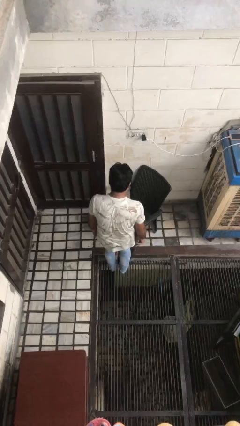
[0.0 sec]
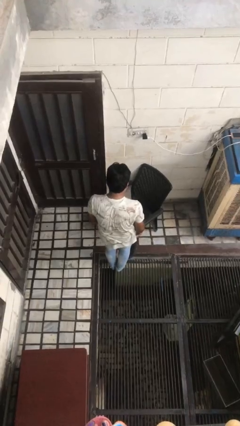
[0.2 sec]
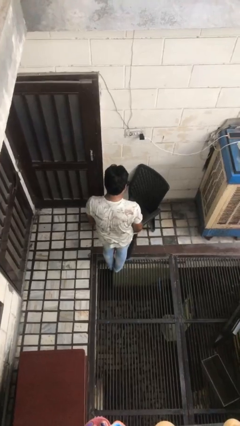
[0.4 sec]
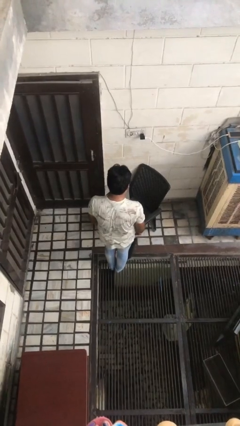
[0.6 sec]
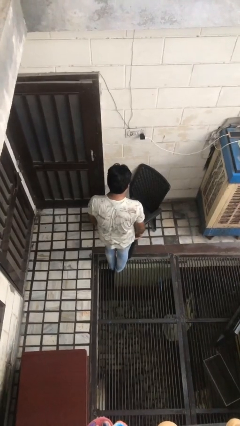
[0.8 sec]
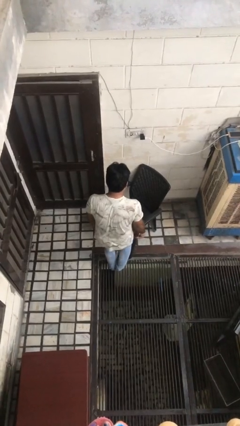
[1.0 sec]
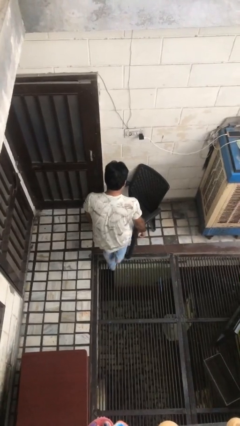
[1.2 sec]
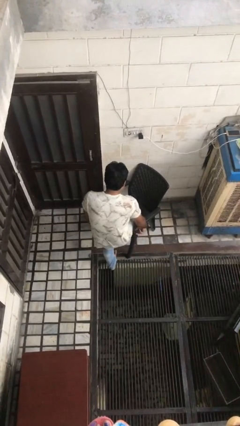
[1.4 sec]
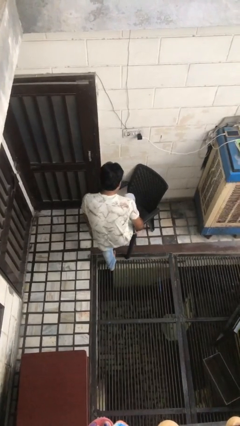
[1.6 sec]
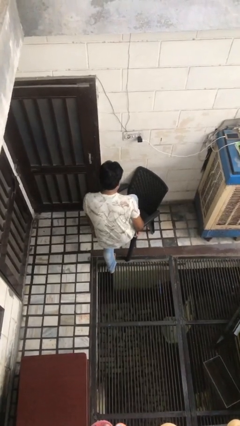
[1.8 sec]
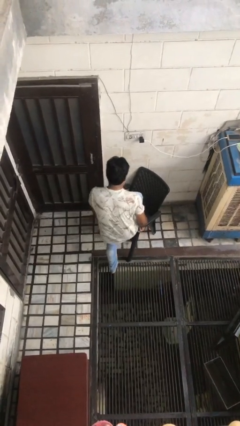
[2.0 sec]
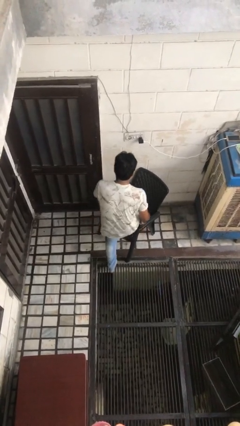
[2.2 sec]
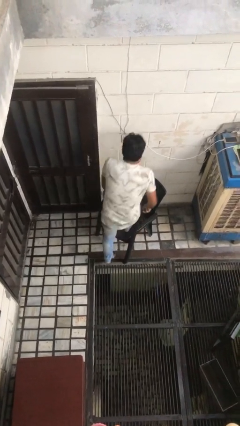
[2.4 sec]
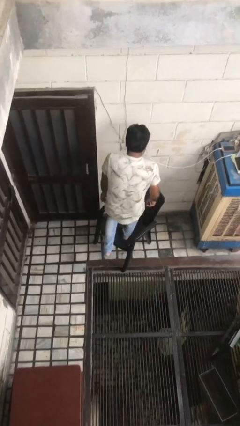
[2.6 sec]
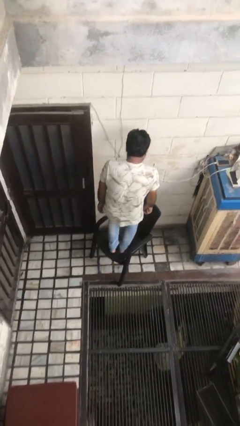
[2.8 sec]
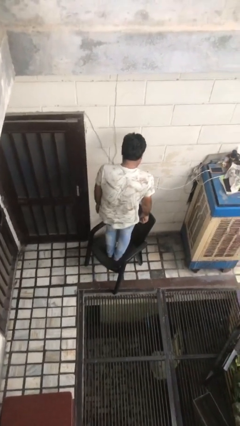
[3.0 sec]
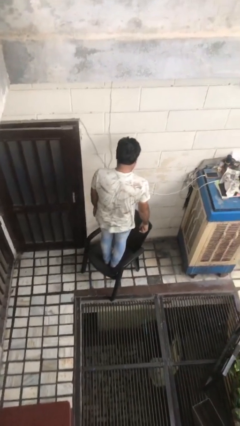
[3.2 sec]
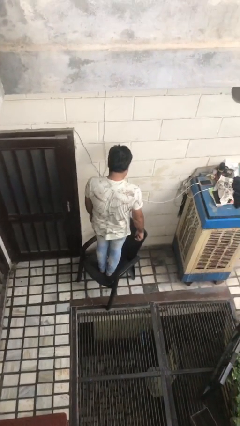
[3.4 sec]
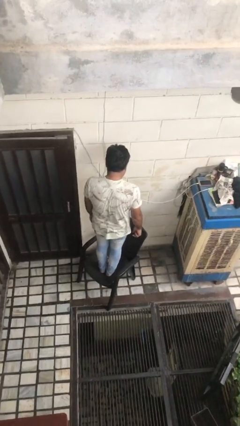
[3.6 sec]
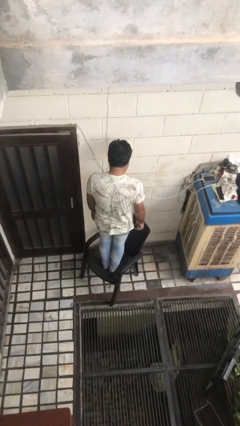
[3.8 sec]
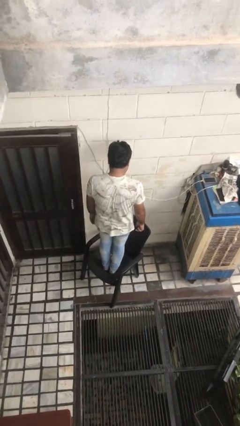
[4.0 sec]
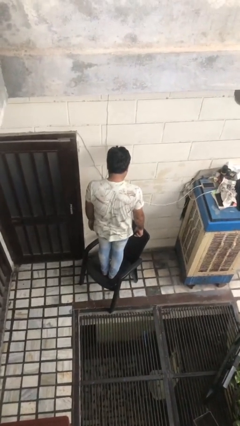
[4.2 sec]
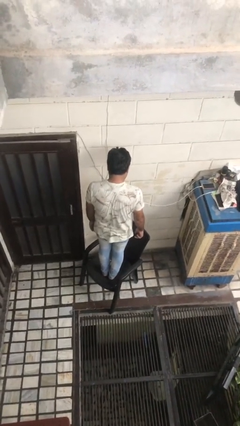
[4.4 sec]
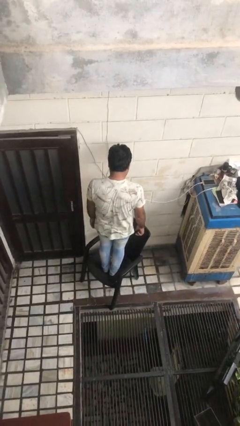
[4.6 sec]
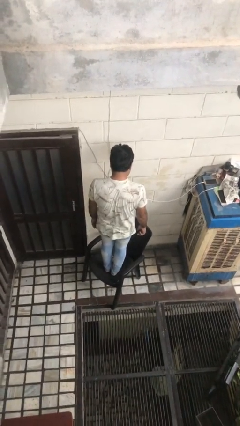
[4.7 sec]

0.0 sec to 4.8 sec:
person climbs on chair

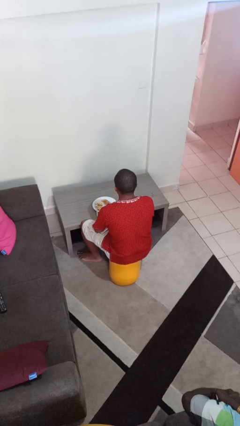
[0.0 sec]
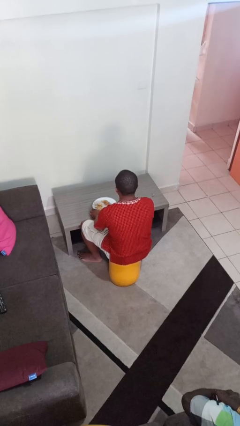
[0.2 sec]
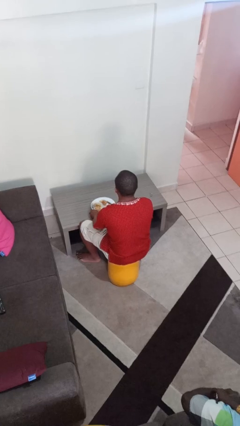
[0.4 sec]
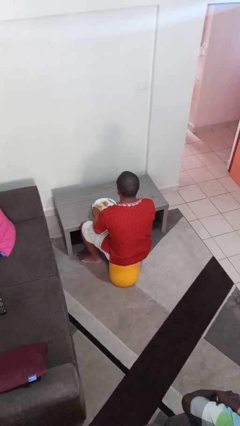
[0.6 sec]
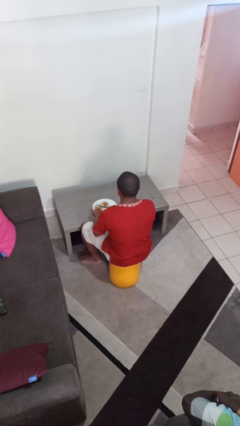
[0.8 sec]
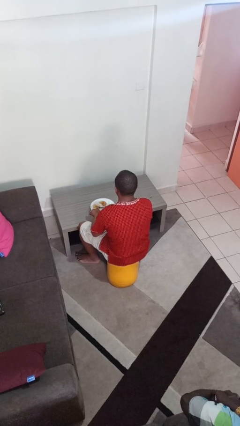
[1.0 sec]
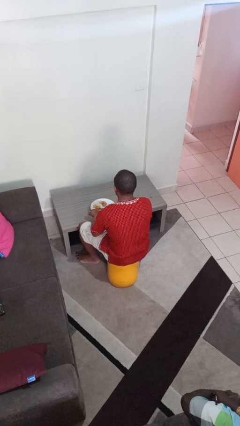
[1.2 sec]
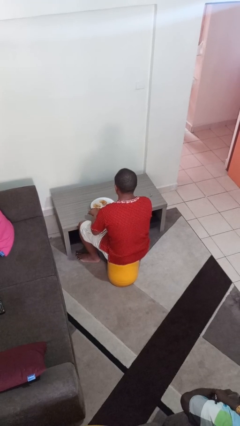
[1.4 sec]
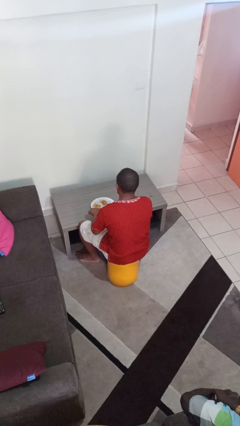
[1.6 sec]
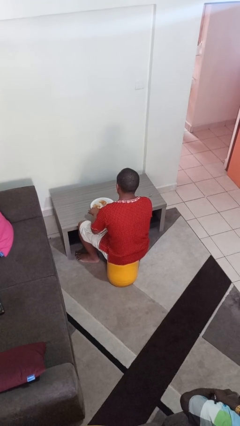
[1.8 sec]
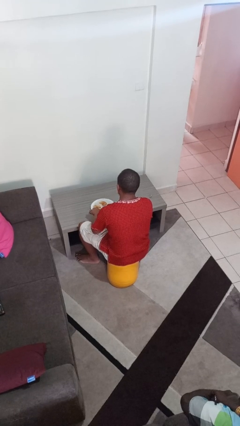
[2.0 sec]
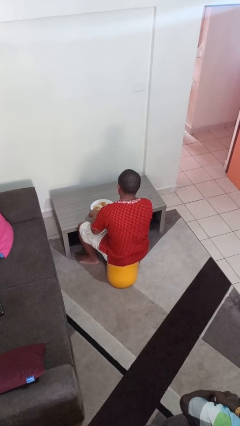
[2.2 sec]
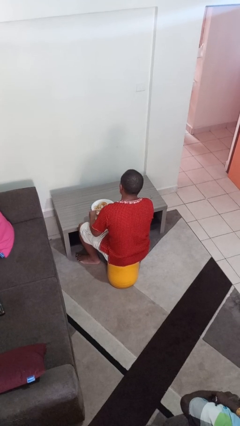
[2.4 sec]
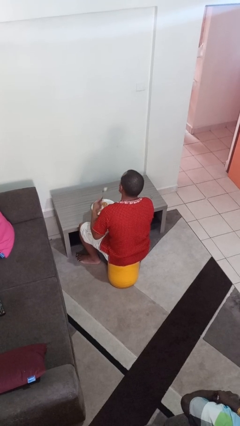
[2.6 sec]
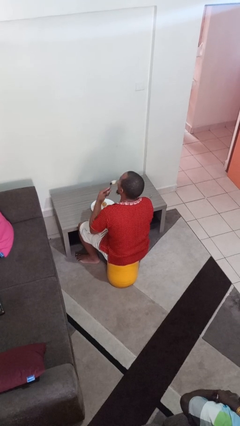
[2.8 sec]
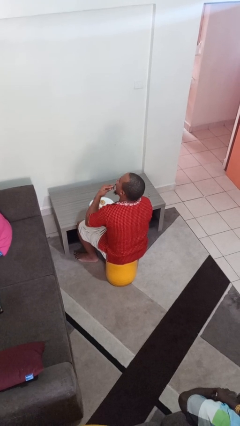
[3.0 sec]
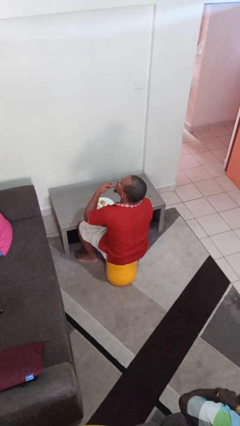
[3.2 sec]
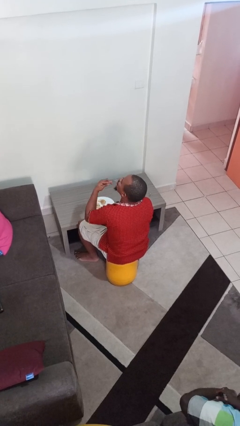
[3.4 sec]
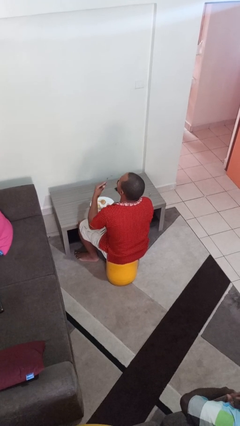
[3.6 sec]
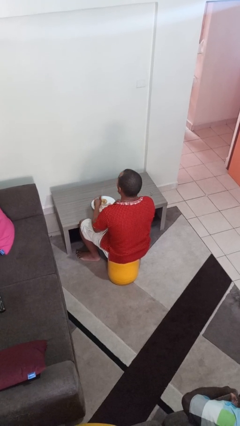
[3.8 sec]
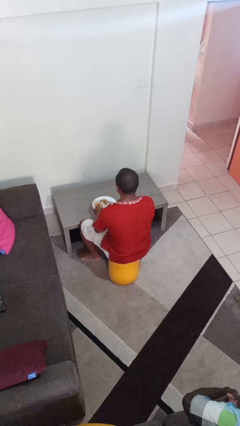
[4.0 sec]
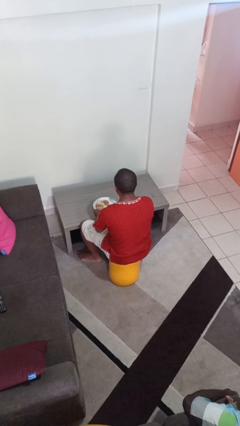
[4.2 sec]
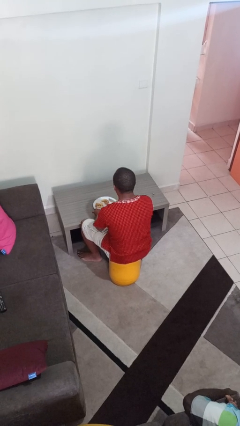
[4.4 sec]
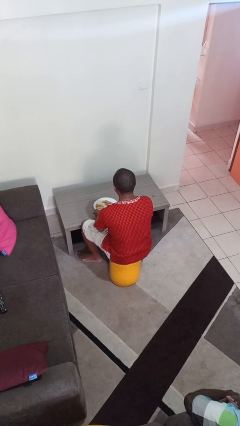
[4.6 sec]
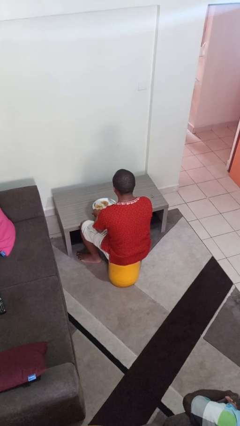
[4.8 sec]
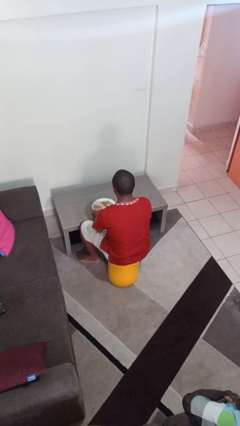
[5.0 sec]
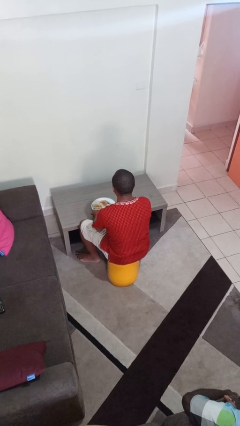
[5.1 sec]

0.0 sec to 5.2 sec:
person eats with utensil

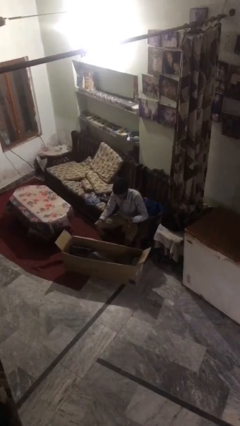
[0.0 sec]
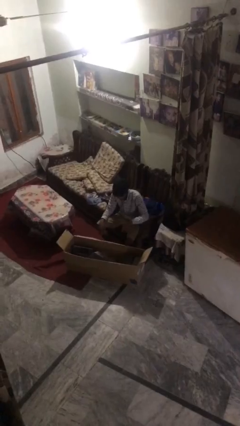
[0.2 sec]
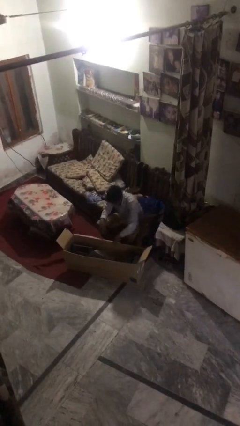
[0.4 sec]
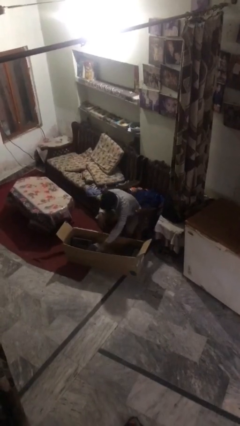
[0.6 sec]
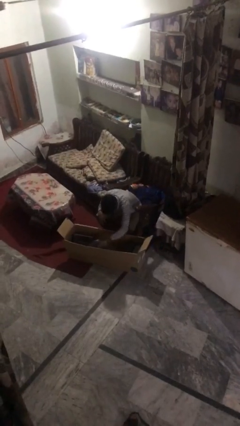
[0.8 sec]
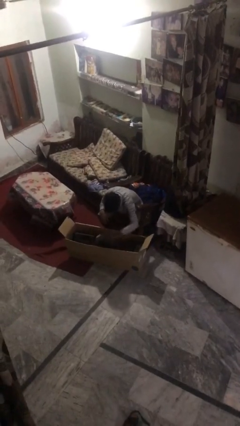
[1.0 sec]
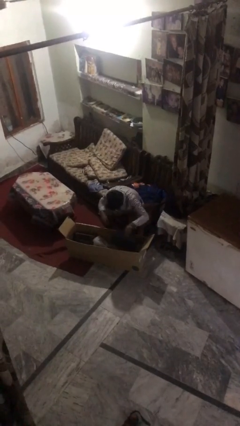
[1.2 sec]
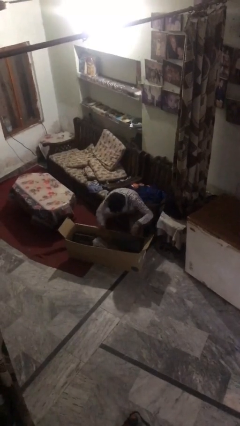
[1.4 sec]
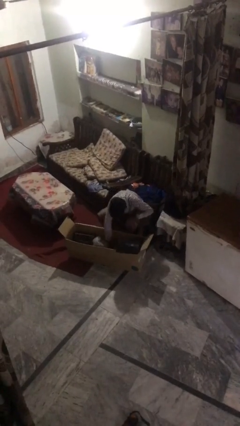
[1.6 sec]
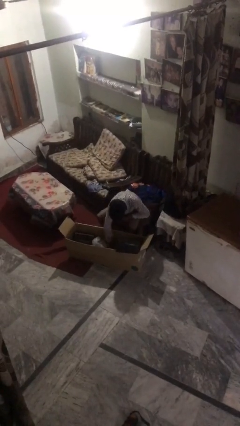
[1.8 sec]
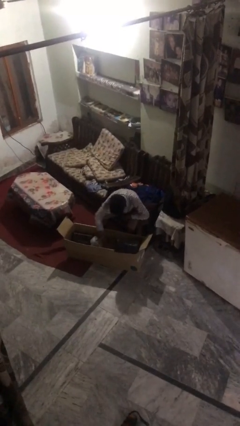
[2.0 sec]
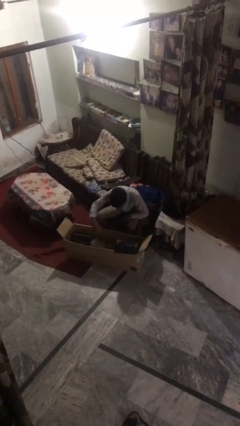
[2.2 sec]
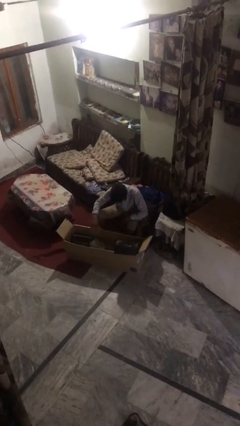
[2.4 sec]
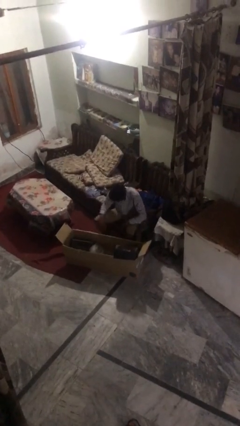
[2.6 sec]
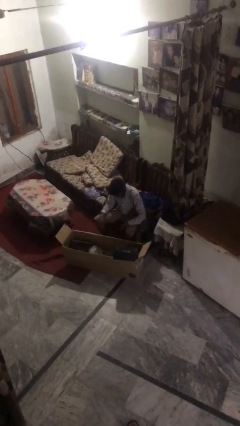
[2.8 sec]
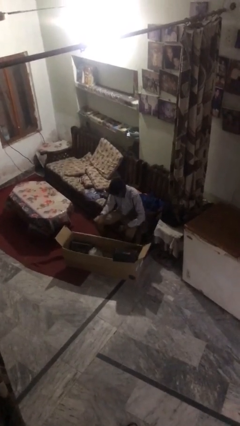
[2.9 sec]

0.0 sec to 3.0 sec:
person searches in box

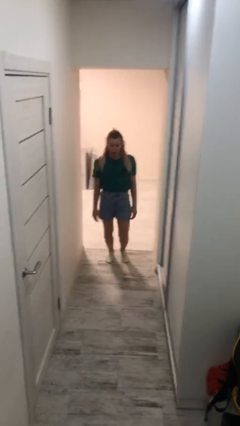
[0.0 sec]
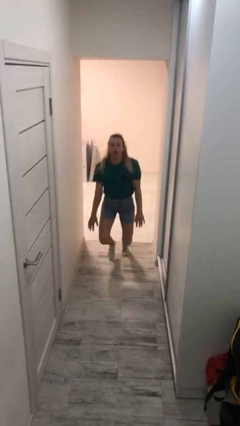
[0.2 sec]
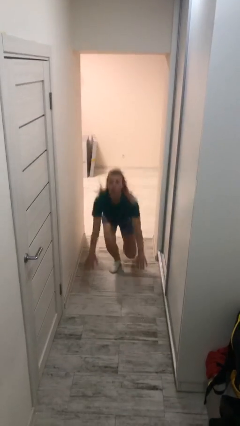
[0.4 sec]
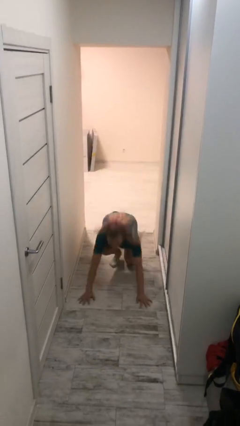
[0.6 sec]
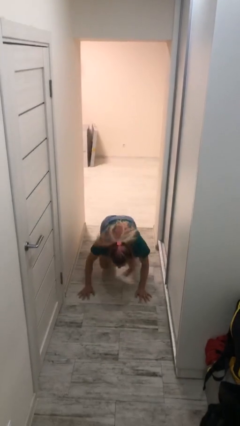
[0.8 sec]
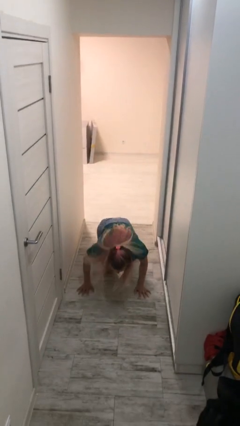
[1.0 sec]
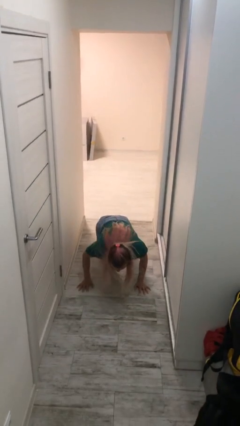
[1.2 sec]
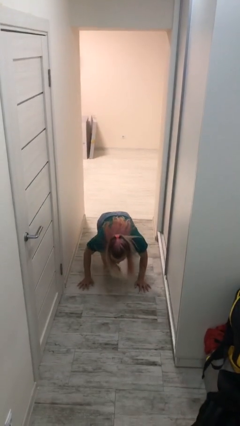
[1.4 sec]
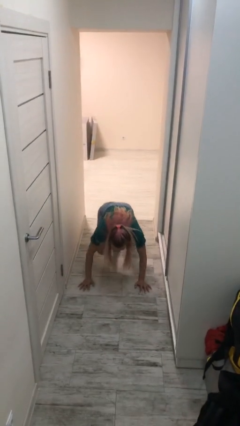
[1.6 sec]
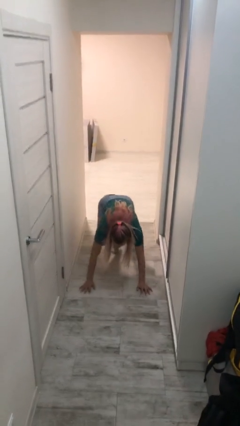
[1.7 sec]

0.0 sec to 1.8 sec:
person trips on object on floor

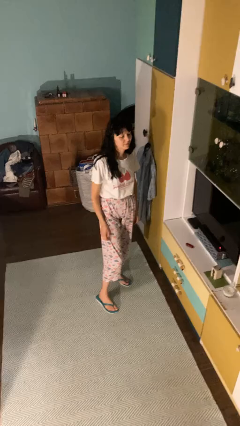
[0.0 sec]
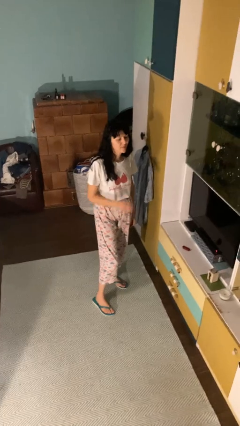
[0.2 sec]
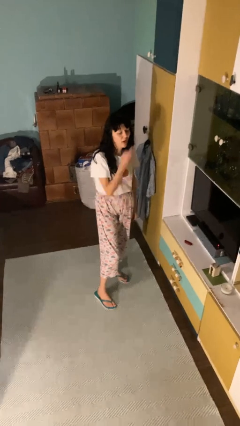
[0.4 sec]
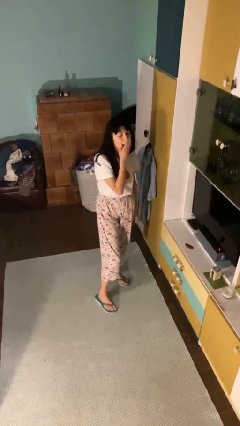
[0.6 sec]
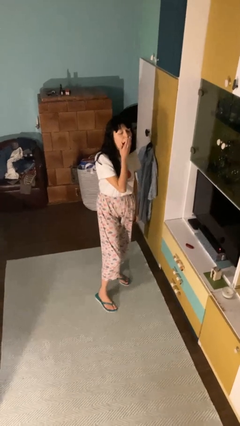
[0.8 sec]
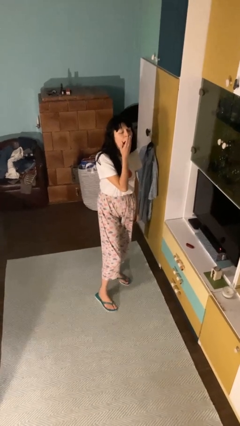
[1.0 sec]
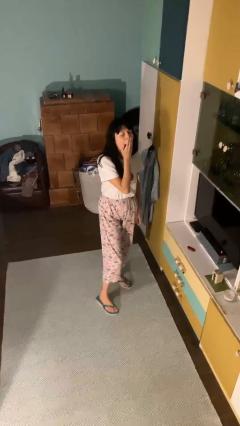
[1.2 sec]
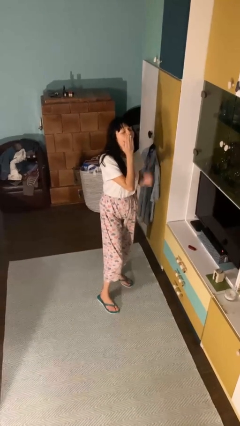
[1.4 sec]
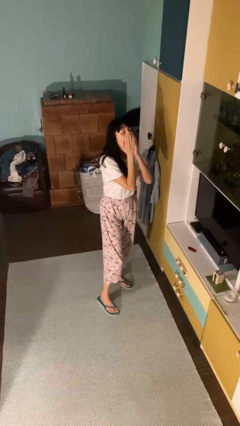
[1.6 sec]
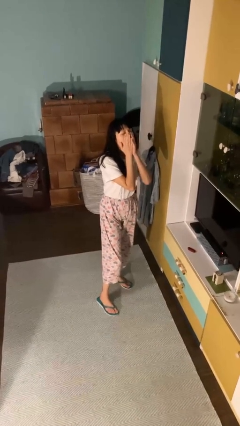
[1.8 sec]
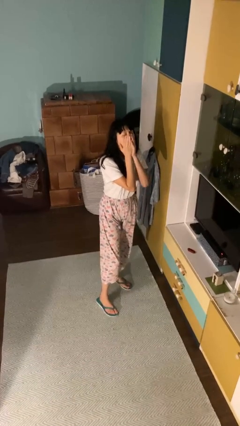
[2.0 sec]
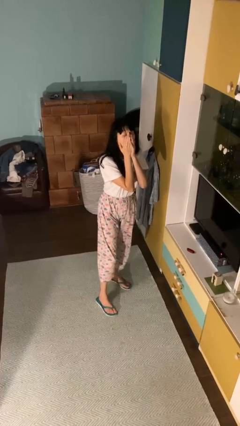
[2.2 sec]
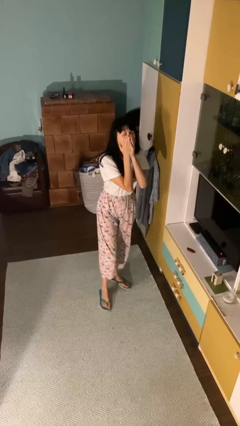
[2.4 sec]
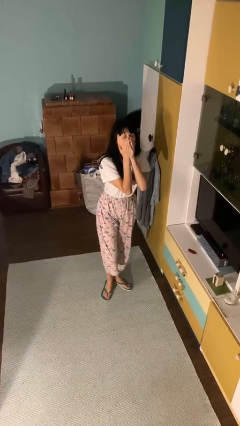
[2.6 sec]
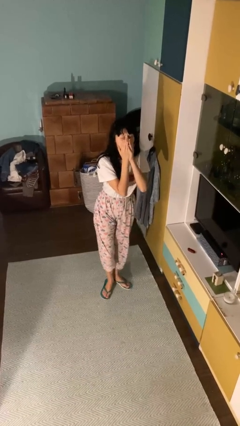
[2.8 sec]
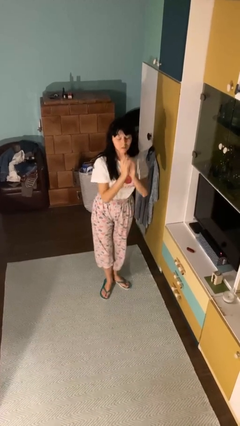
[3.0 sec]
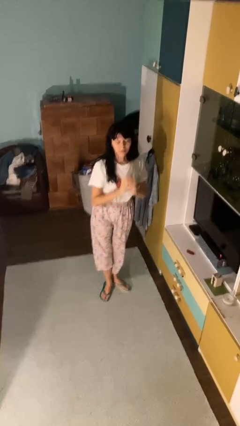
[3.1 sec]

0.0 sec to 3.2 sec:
person yawns
